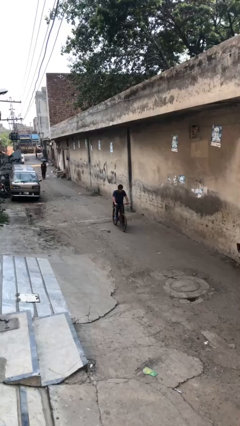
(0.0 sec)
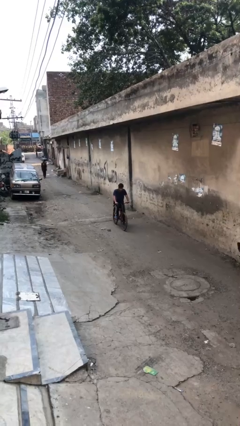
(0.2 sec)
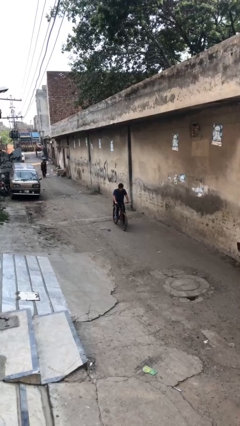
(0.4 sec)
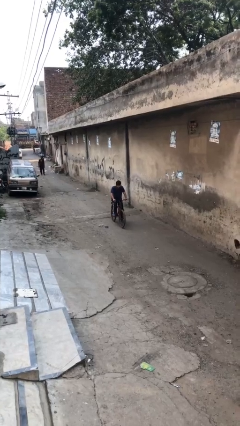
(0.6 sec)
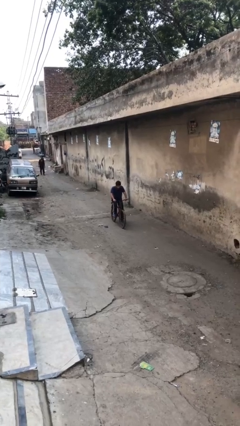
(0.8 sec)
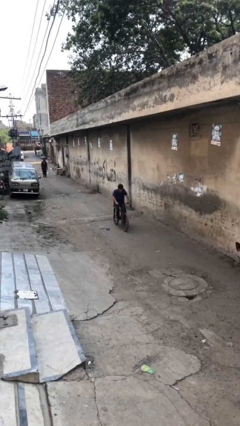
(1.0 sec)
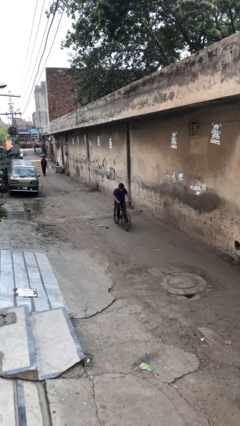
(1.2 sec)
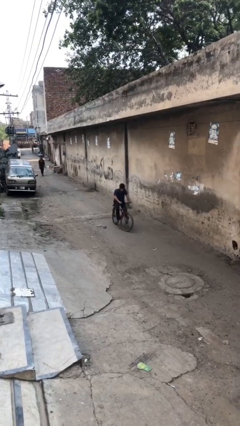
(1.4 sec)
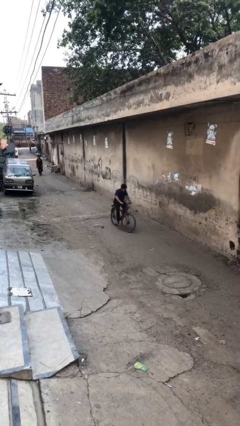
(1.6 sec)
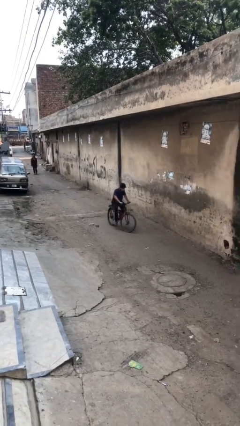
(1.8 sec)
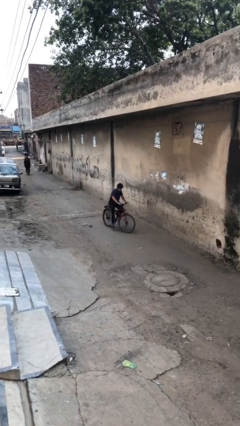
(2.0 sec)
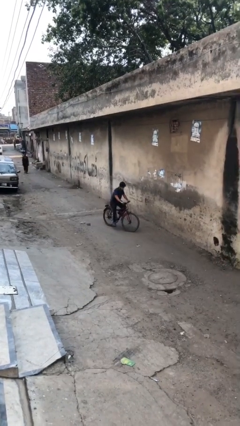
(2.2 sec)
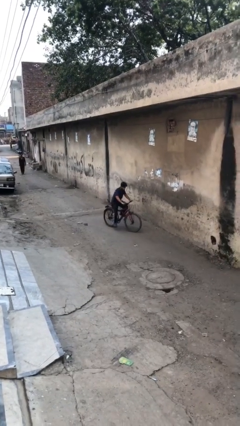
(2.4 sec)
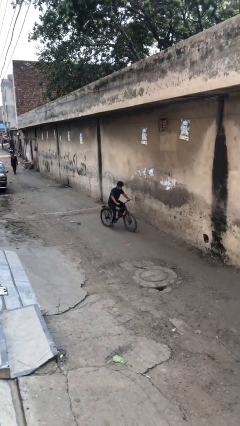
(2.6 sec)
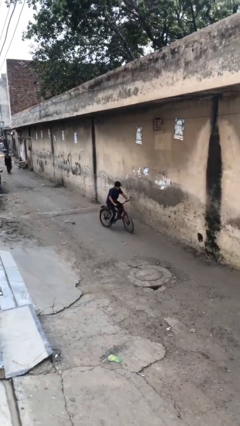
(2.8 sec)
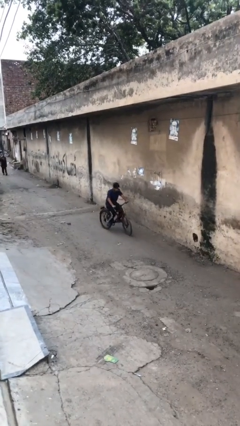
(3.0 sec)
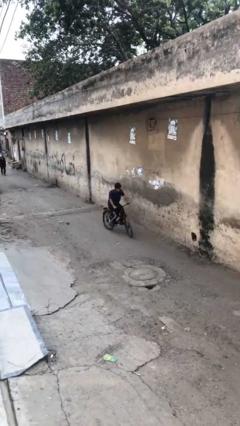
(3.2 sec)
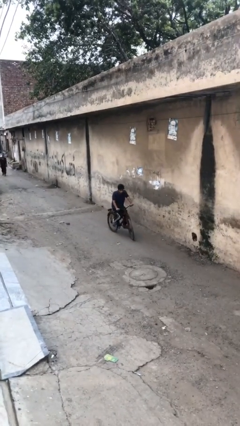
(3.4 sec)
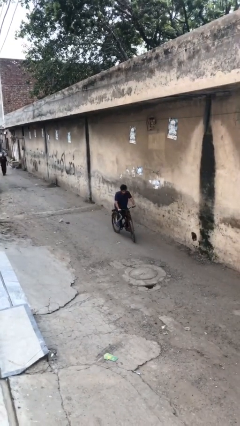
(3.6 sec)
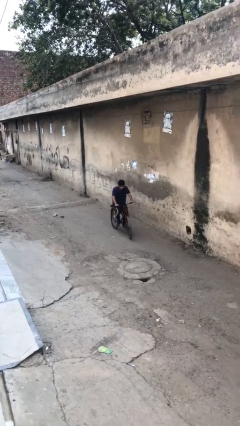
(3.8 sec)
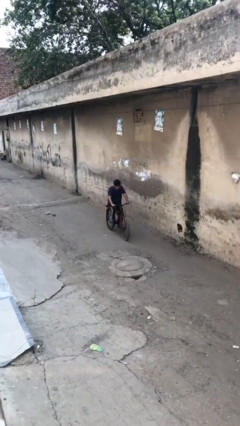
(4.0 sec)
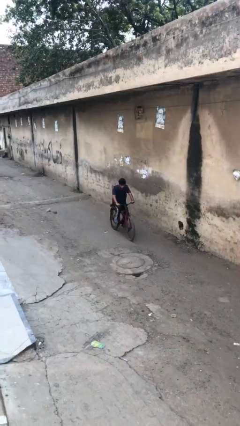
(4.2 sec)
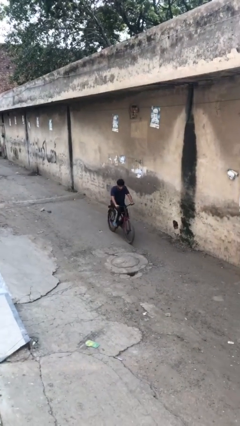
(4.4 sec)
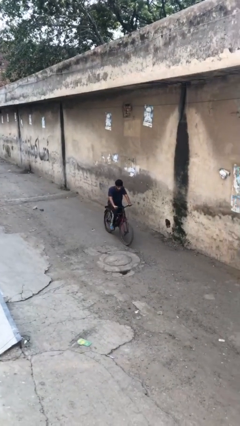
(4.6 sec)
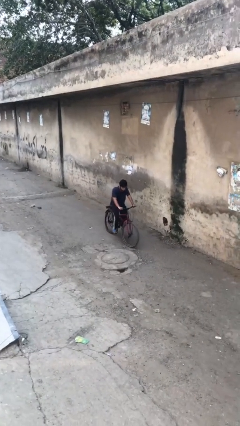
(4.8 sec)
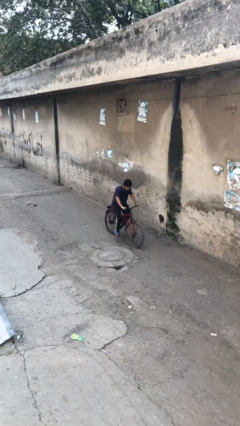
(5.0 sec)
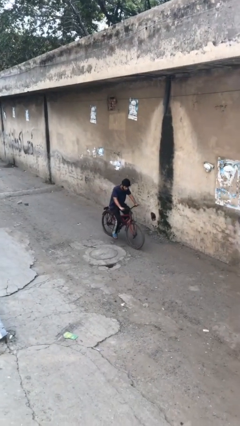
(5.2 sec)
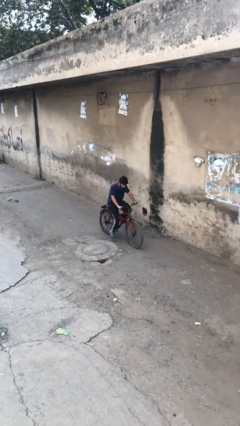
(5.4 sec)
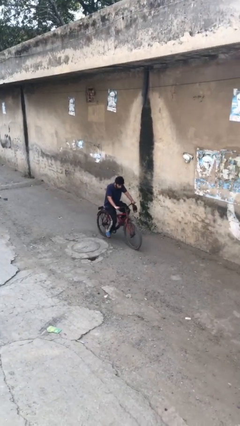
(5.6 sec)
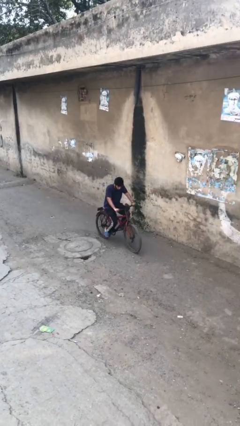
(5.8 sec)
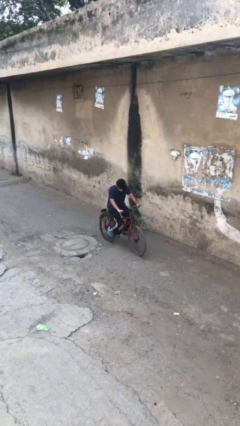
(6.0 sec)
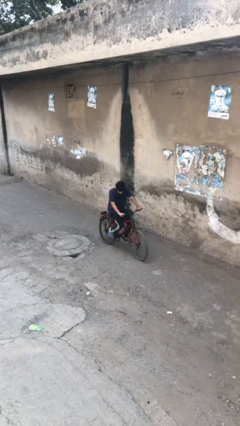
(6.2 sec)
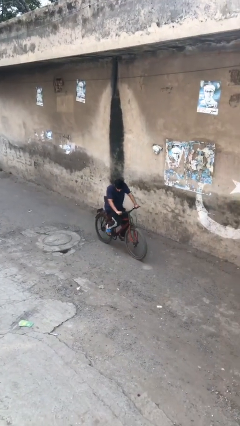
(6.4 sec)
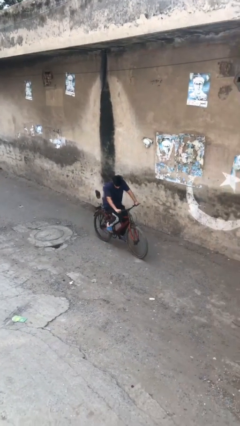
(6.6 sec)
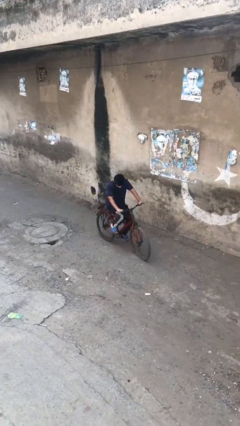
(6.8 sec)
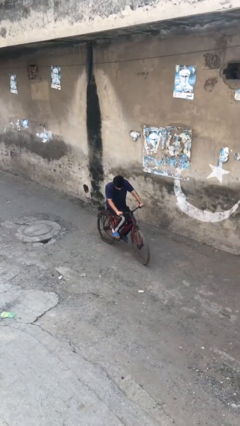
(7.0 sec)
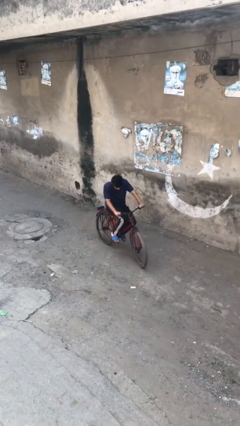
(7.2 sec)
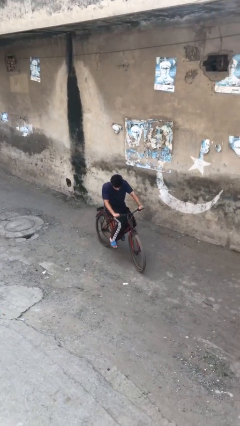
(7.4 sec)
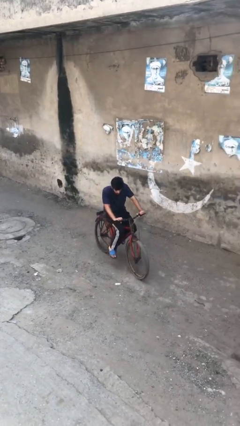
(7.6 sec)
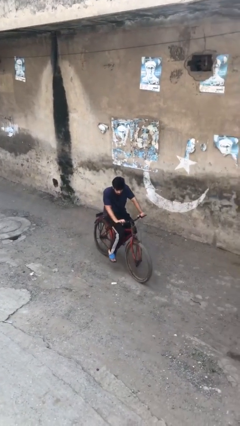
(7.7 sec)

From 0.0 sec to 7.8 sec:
person rides bicycle

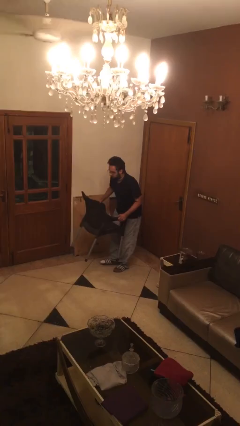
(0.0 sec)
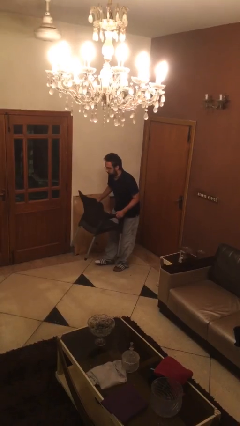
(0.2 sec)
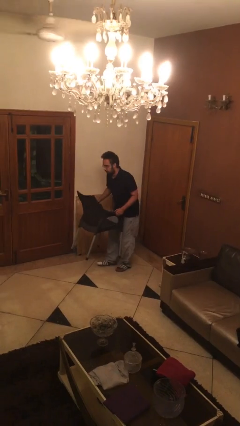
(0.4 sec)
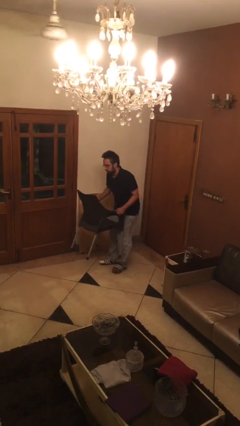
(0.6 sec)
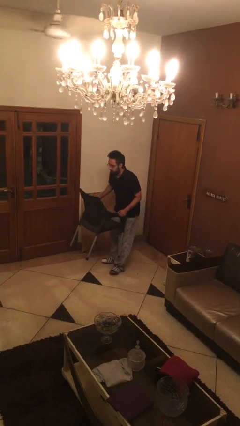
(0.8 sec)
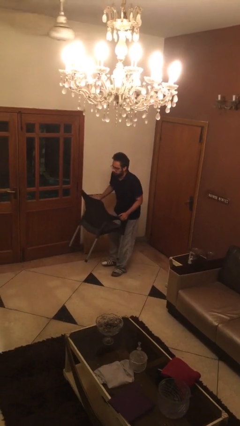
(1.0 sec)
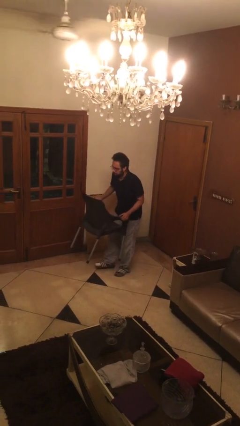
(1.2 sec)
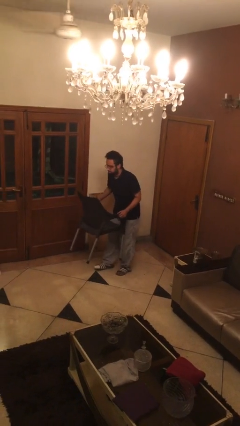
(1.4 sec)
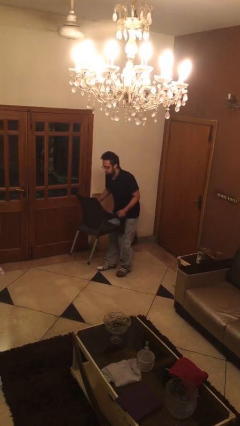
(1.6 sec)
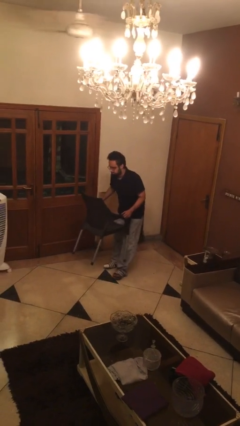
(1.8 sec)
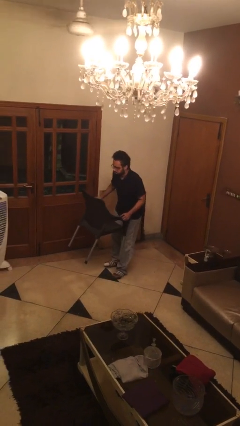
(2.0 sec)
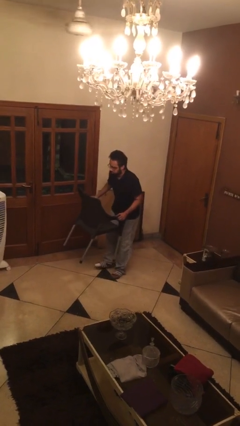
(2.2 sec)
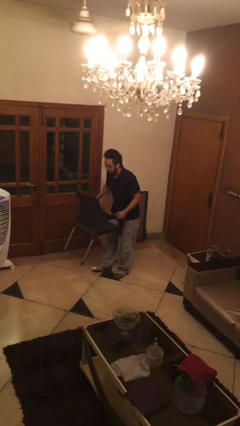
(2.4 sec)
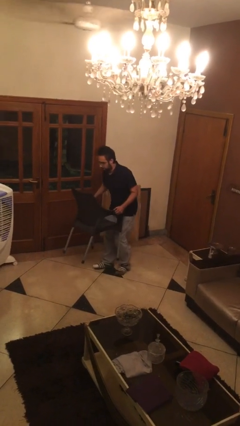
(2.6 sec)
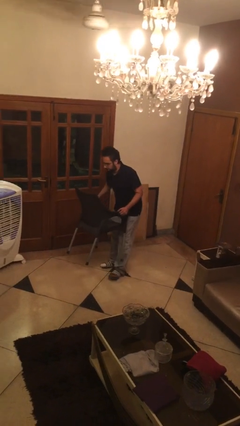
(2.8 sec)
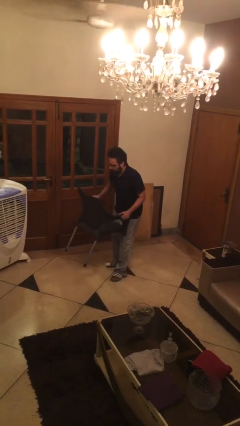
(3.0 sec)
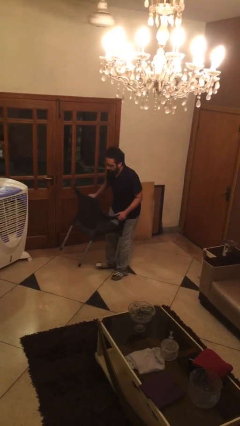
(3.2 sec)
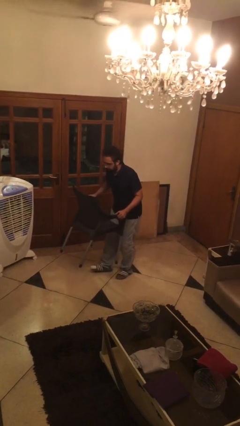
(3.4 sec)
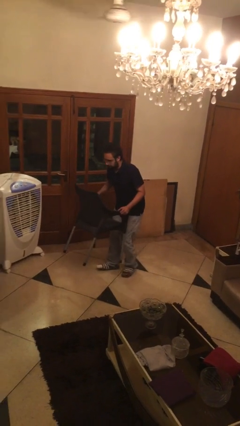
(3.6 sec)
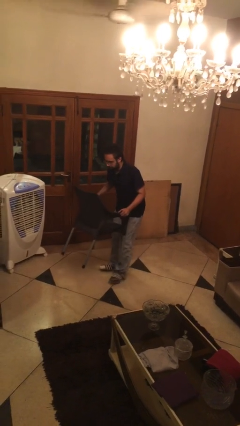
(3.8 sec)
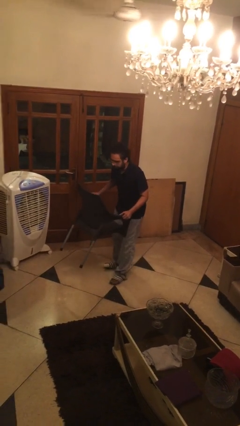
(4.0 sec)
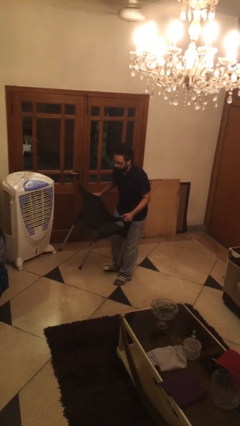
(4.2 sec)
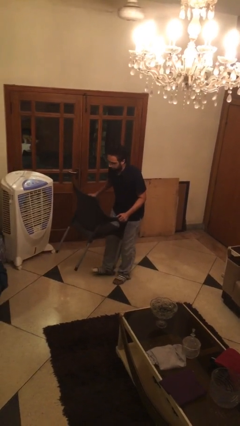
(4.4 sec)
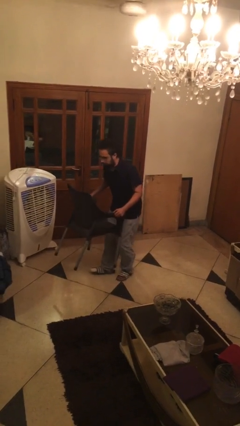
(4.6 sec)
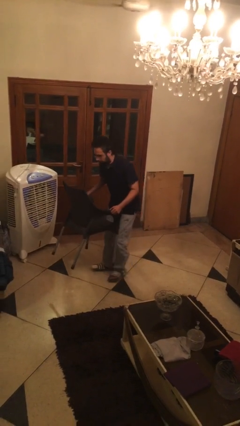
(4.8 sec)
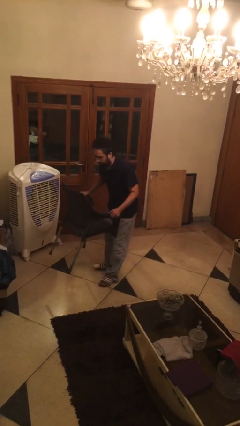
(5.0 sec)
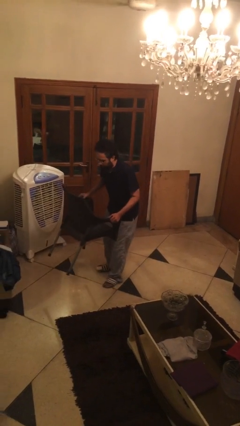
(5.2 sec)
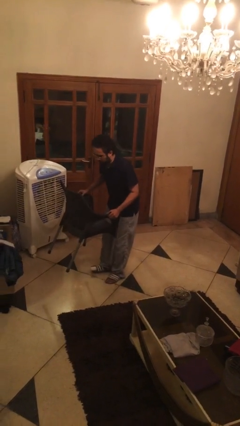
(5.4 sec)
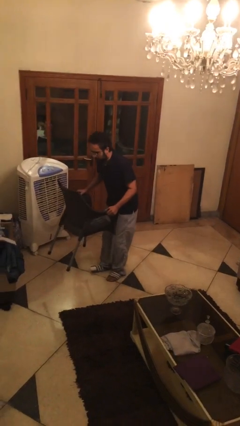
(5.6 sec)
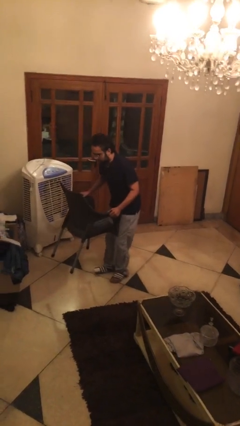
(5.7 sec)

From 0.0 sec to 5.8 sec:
person carries heavy object

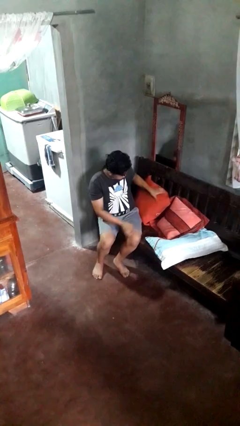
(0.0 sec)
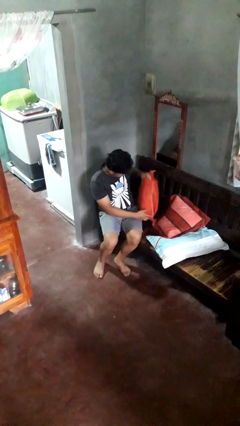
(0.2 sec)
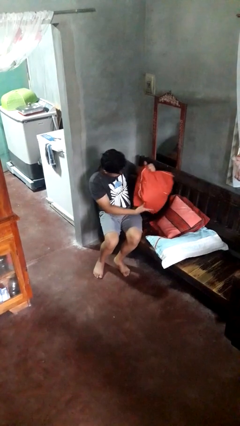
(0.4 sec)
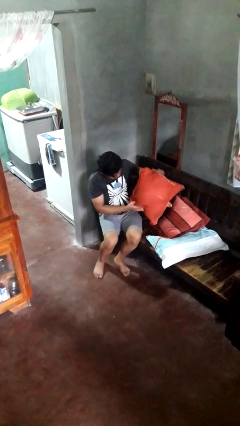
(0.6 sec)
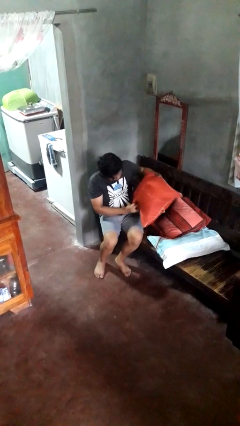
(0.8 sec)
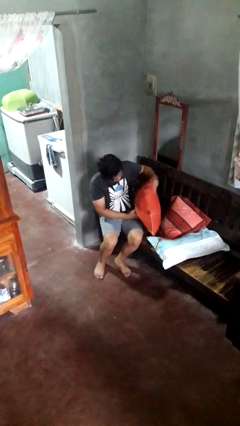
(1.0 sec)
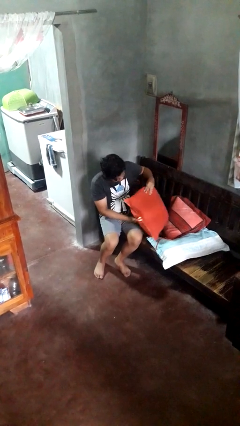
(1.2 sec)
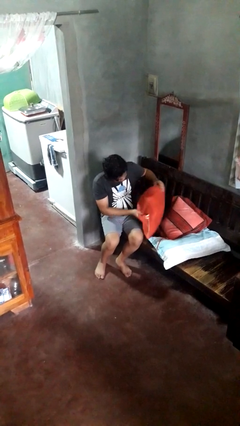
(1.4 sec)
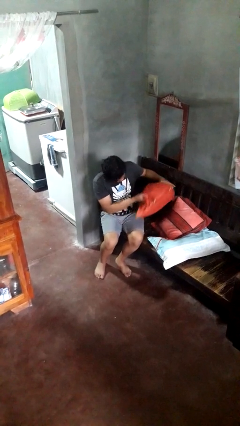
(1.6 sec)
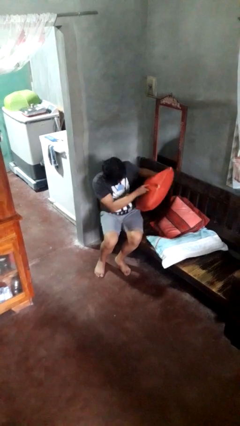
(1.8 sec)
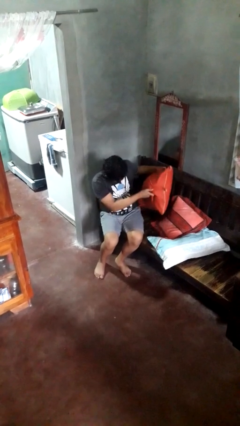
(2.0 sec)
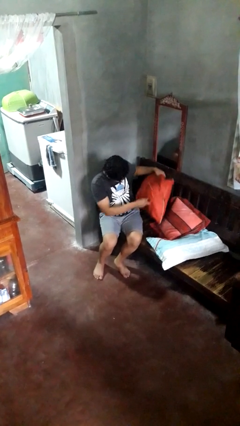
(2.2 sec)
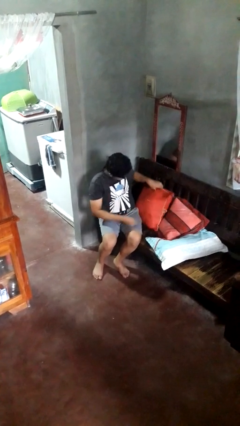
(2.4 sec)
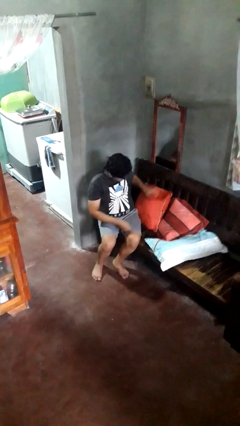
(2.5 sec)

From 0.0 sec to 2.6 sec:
person searches in couch

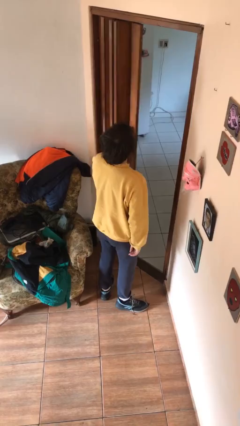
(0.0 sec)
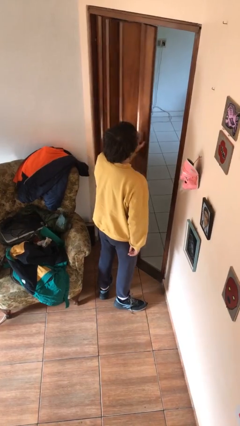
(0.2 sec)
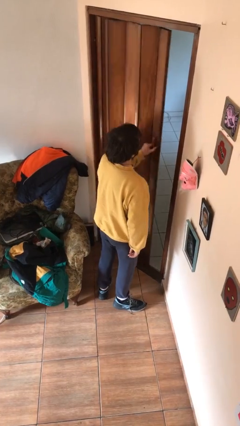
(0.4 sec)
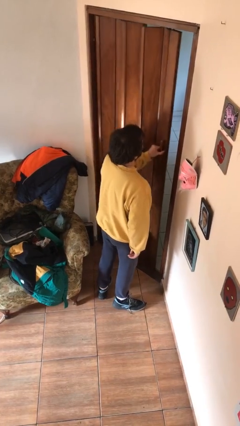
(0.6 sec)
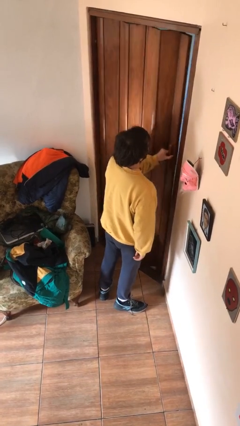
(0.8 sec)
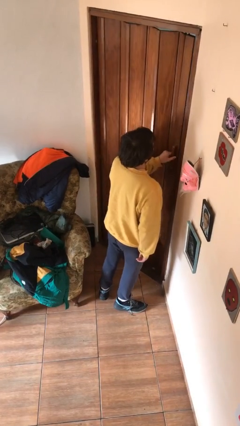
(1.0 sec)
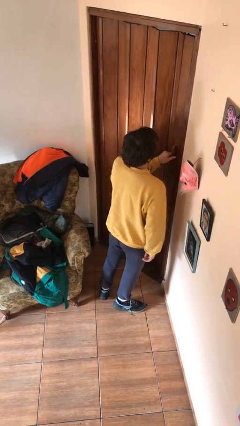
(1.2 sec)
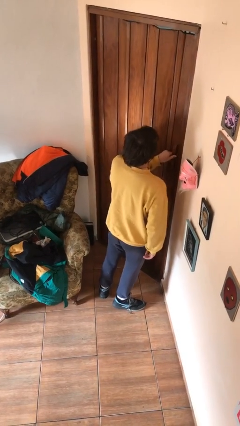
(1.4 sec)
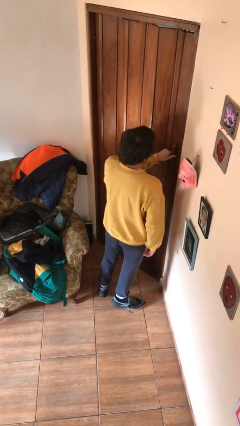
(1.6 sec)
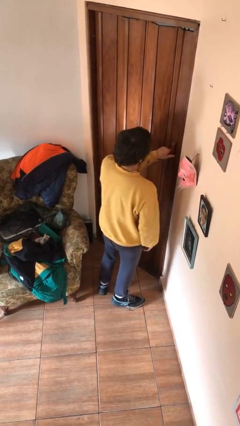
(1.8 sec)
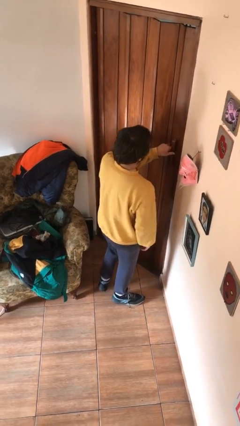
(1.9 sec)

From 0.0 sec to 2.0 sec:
person closes sliding door
